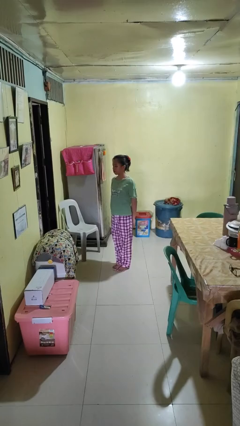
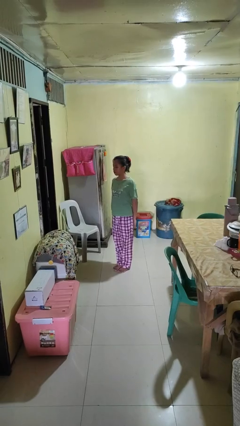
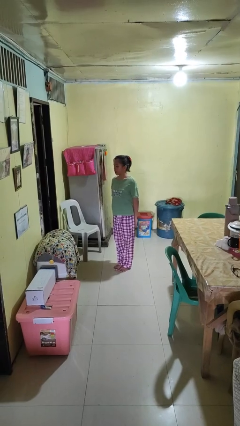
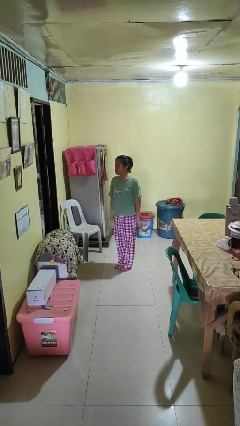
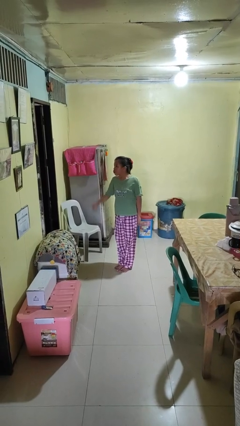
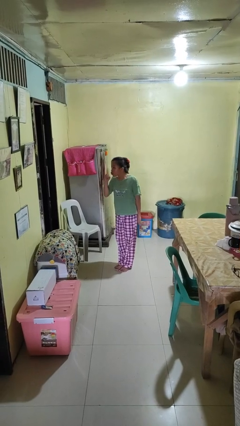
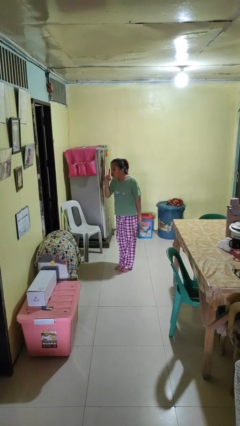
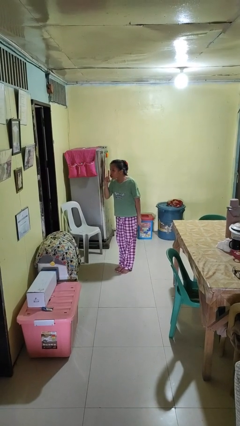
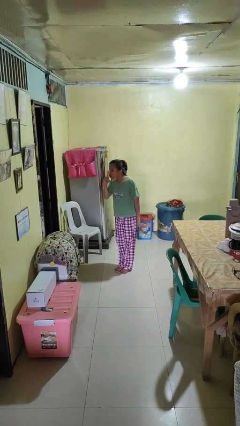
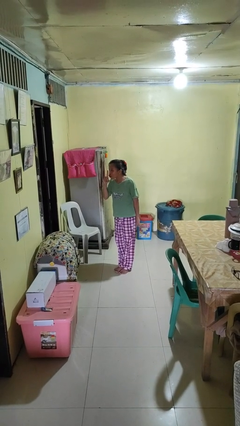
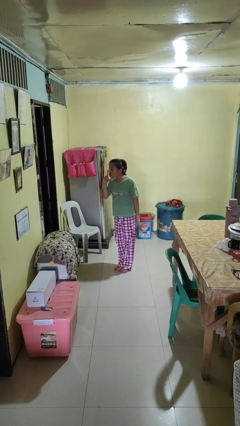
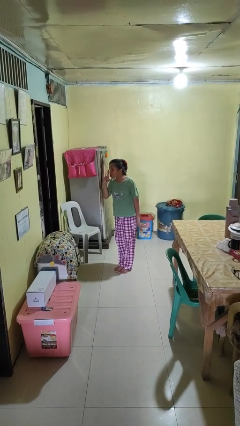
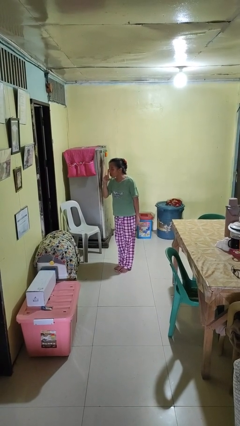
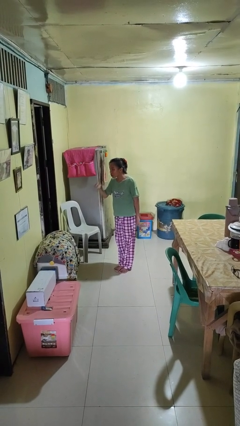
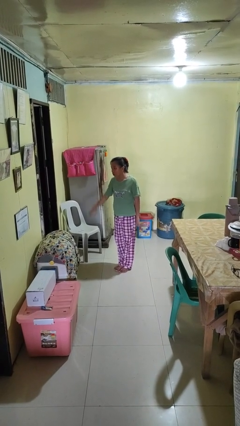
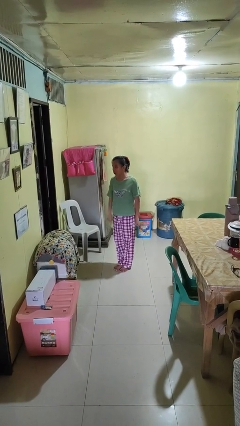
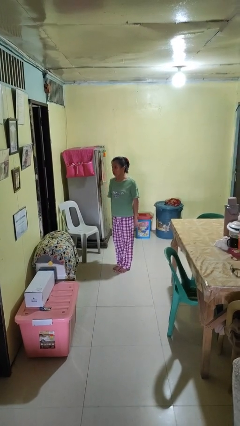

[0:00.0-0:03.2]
person gestures be quiet

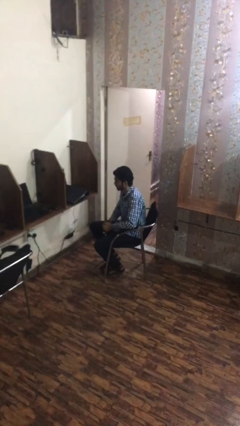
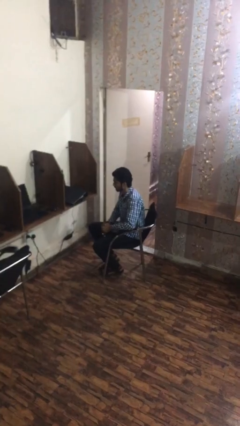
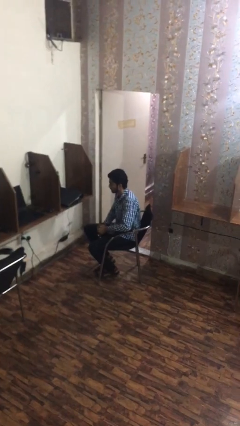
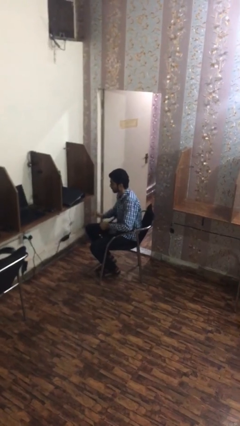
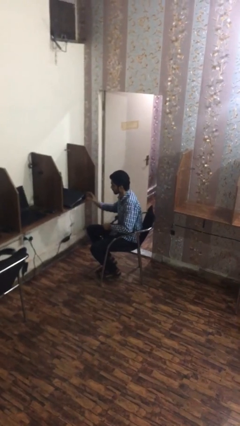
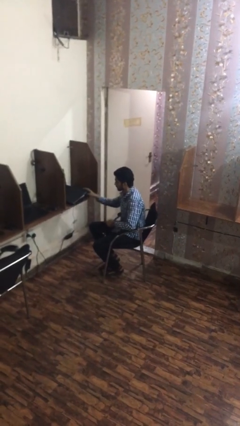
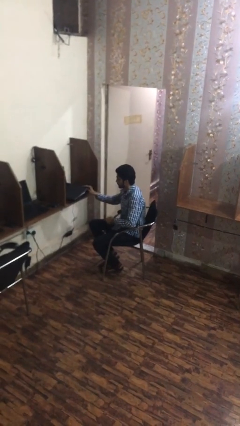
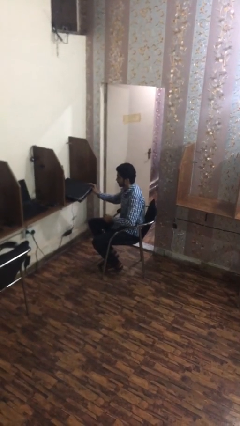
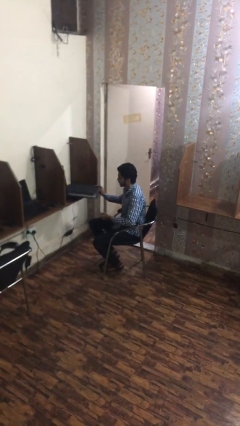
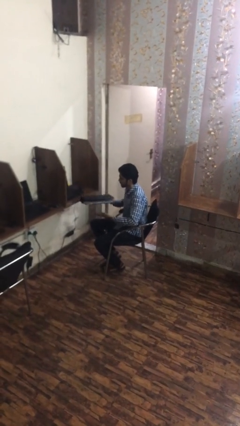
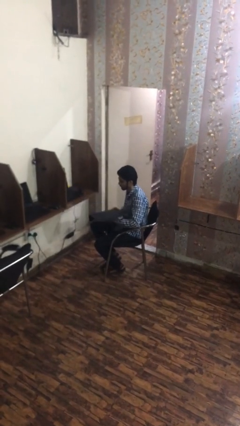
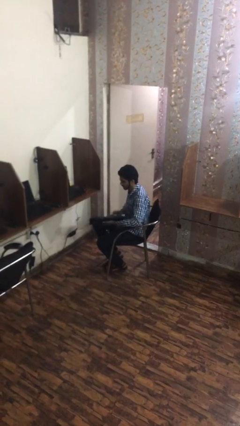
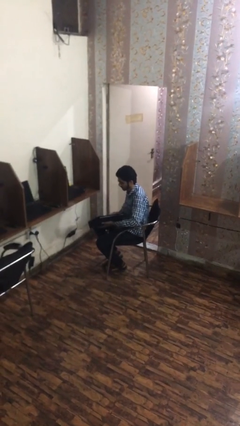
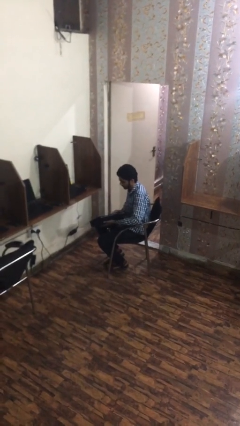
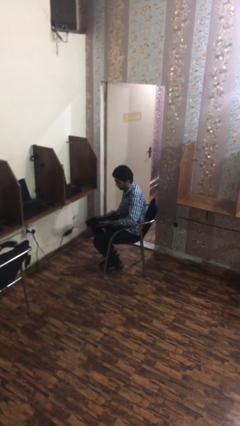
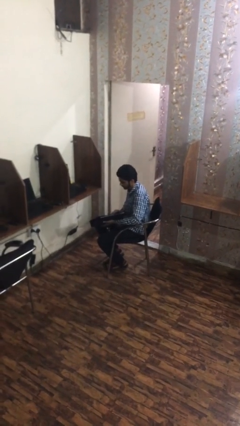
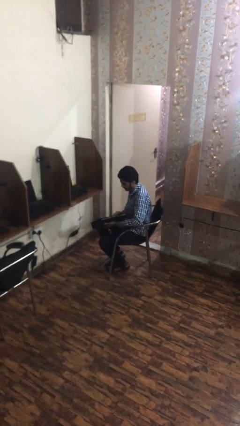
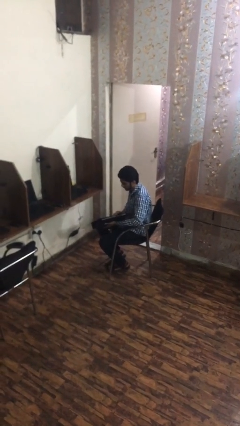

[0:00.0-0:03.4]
person picks up object from table

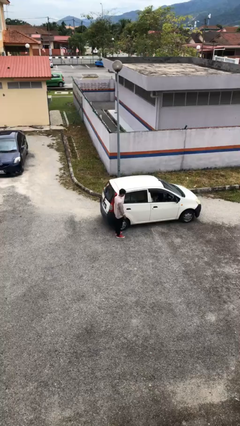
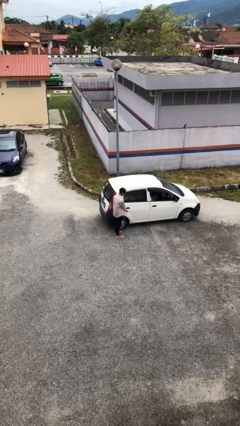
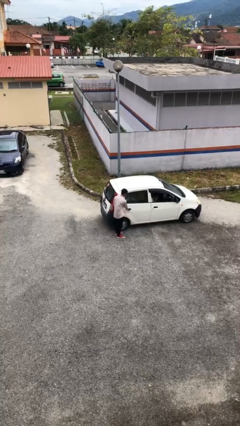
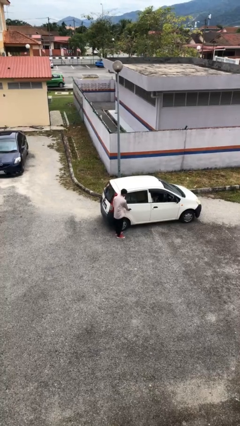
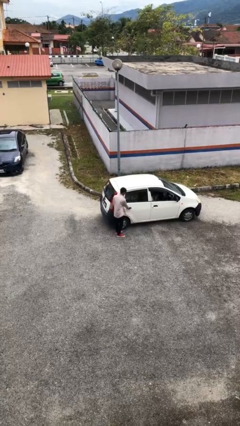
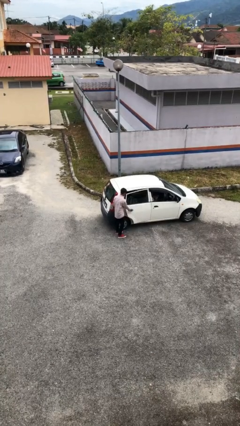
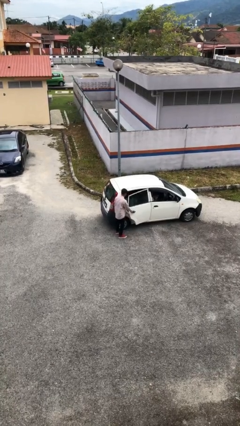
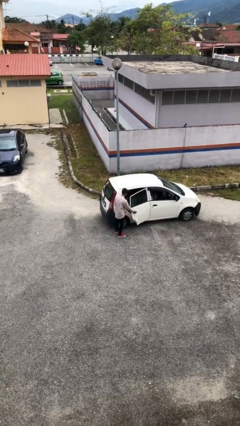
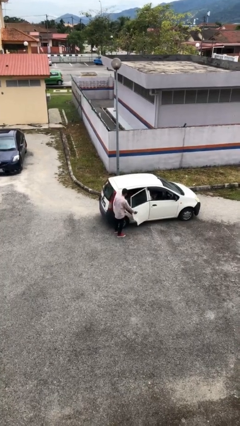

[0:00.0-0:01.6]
person opens car door

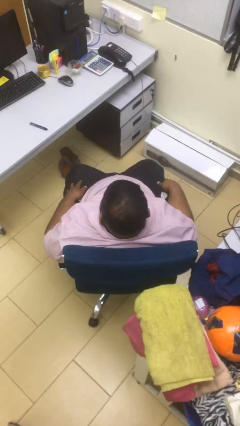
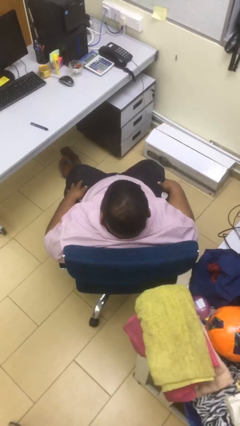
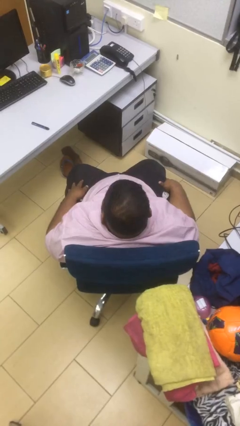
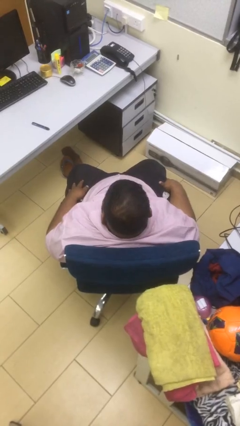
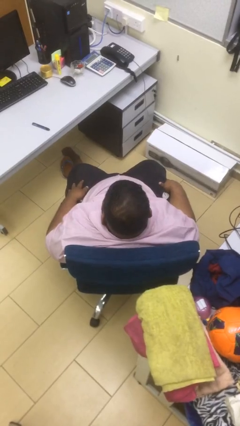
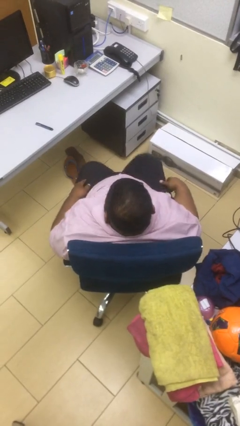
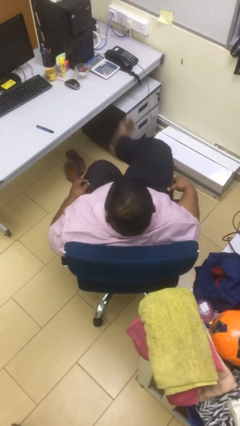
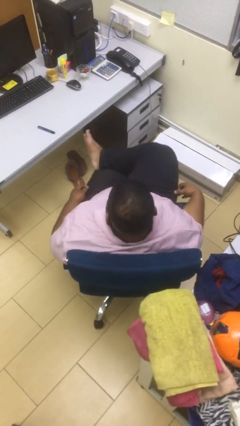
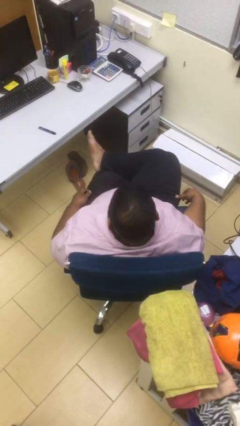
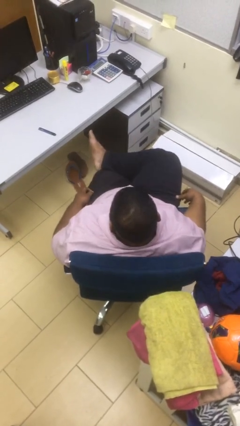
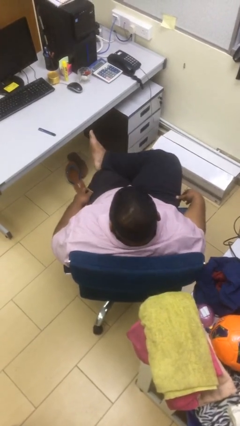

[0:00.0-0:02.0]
person crosses legs

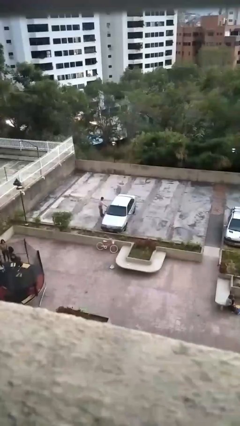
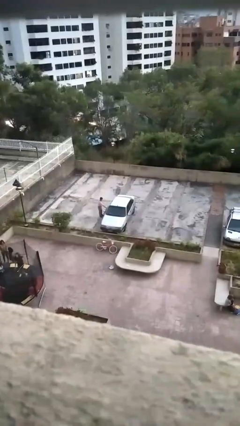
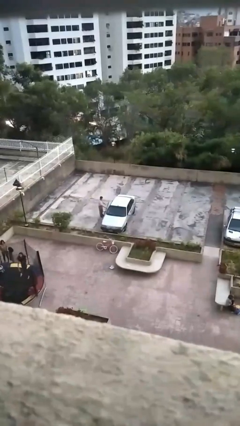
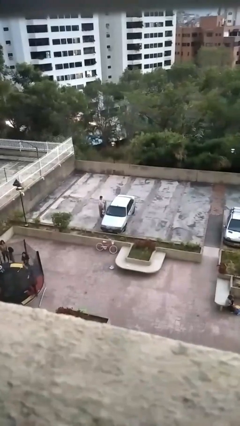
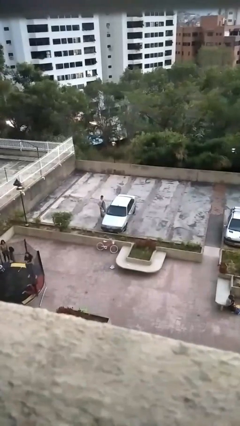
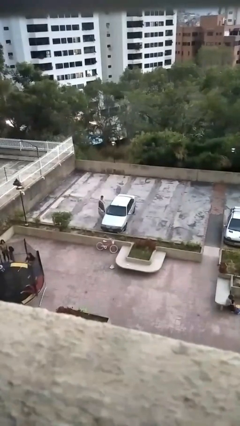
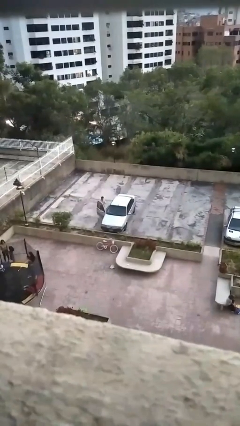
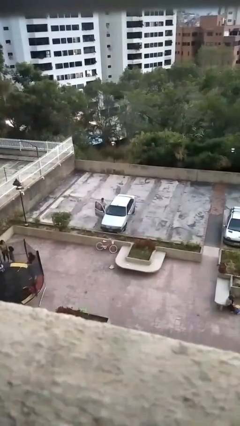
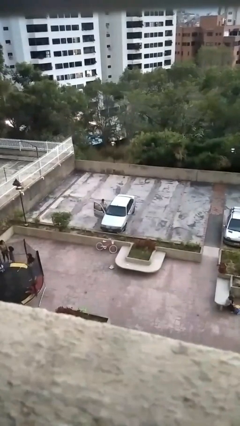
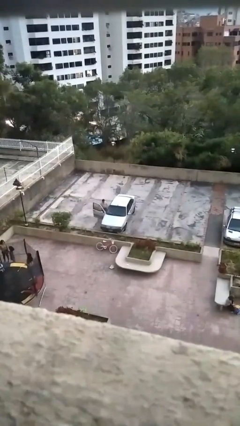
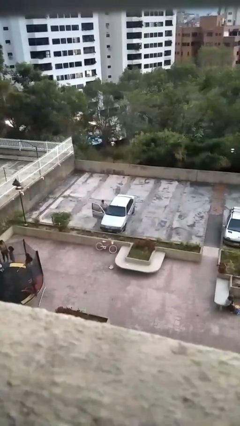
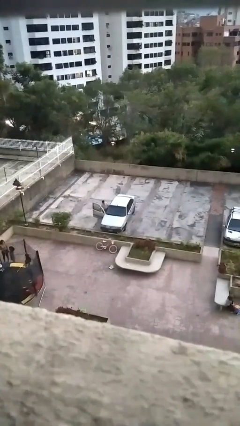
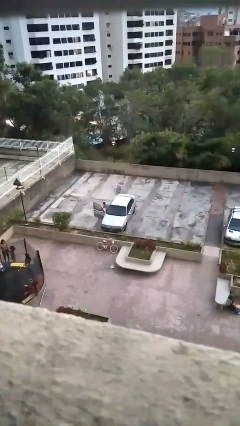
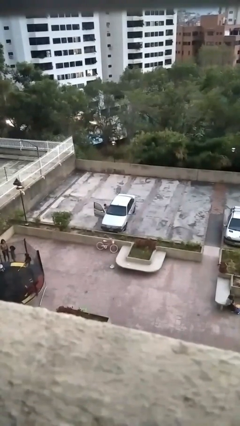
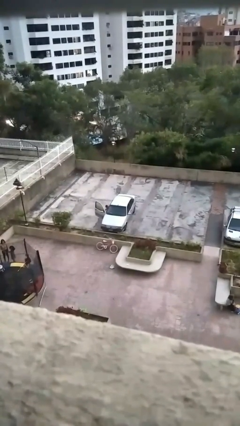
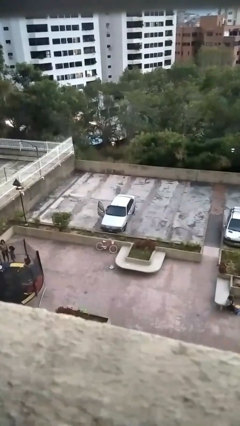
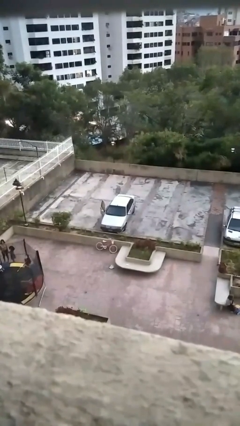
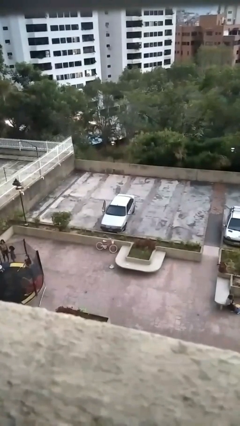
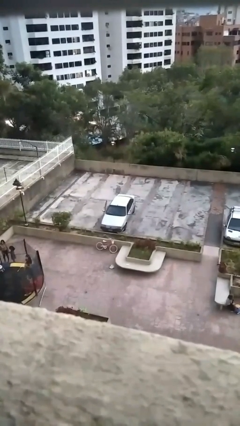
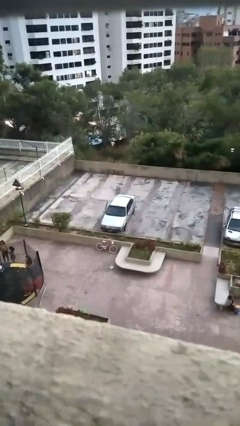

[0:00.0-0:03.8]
car picks up person

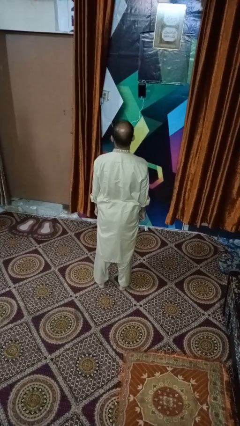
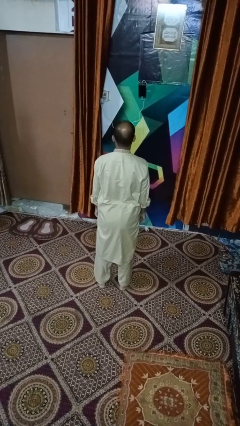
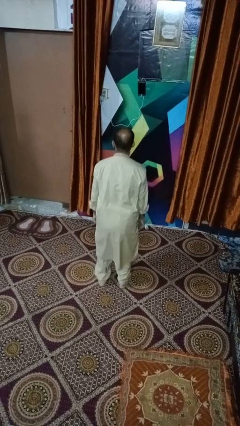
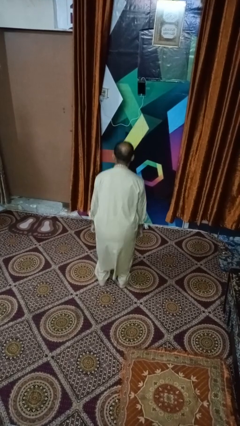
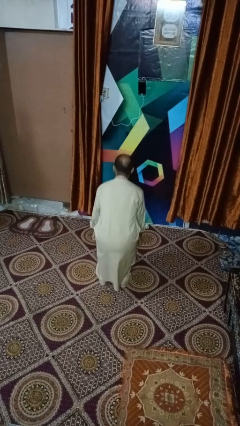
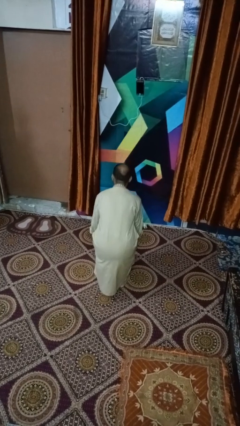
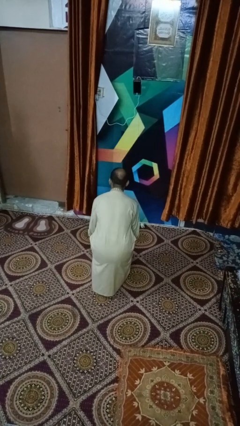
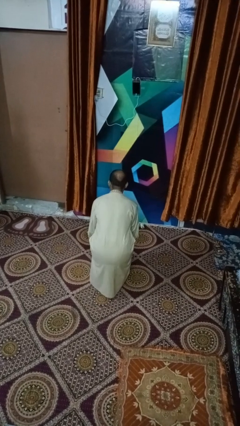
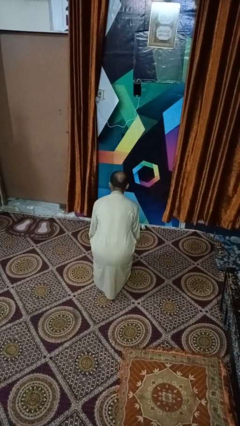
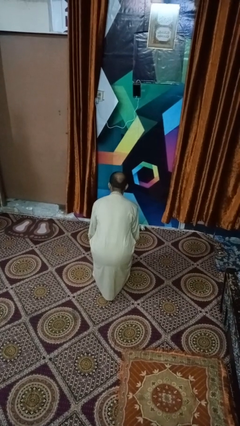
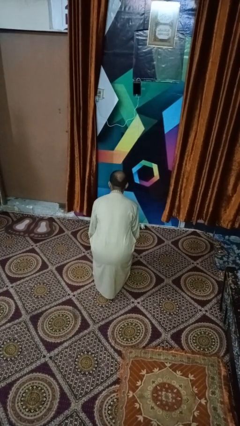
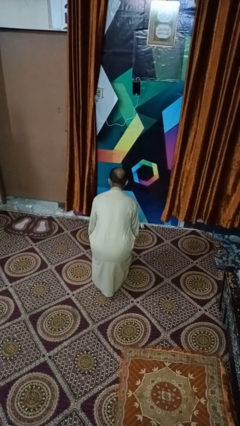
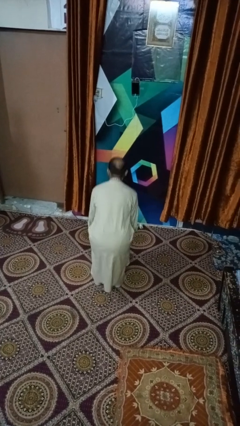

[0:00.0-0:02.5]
person squats

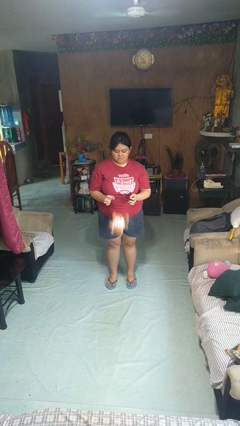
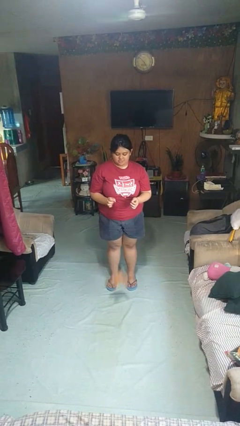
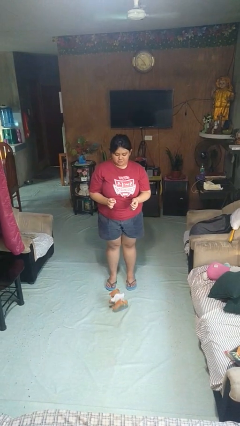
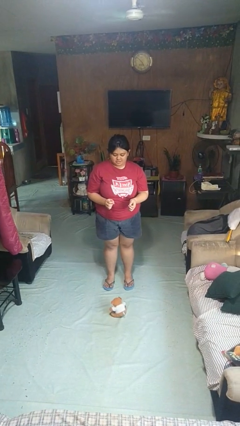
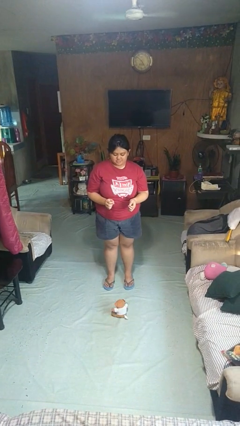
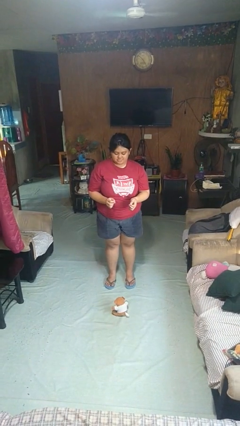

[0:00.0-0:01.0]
person drops object
